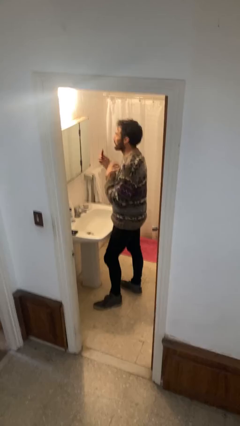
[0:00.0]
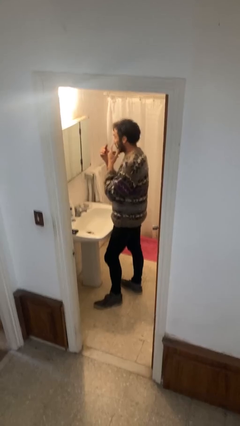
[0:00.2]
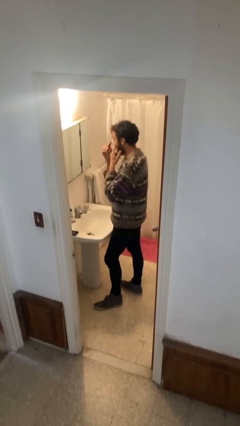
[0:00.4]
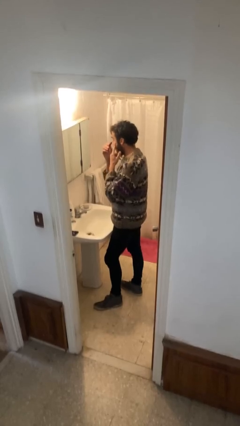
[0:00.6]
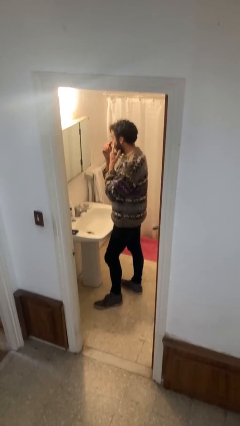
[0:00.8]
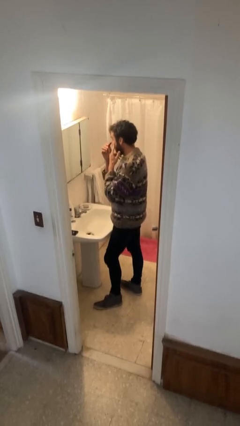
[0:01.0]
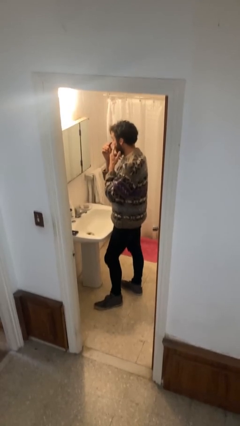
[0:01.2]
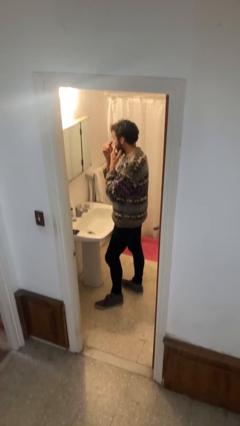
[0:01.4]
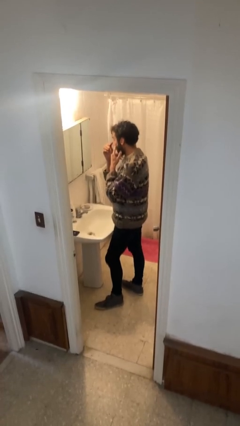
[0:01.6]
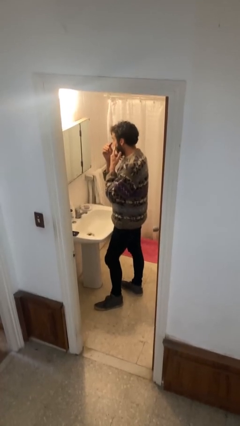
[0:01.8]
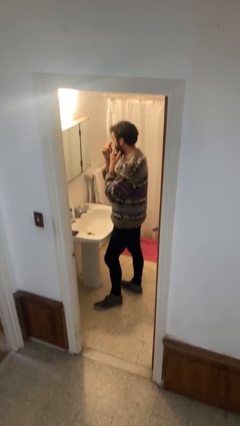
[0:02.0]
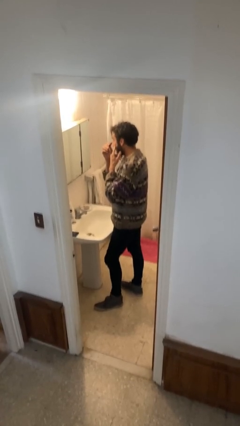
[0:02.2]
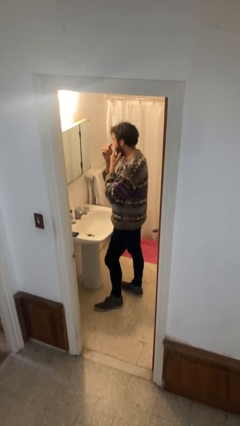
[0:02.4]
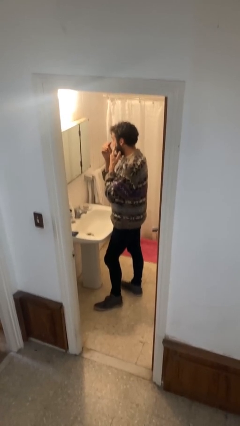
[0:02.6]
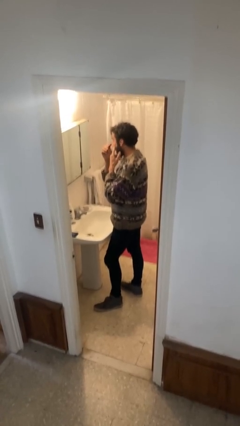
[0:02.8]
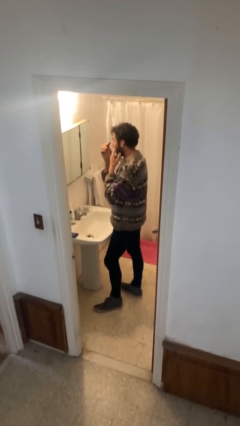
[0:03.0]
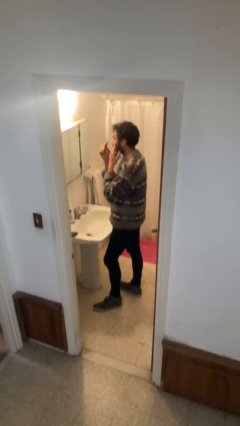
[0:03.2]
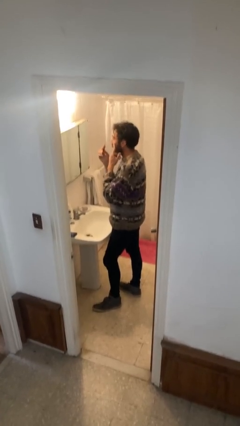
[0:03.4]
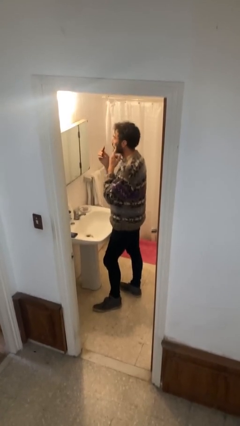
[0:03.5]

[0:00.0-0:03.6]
person applies eye makeup

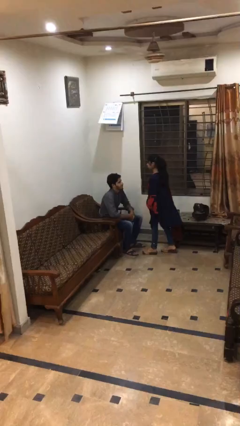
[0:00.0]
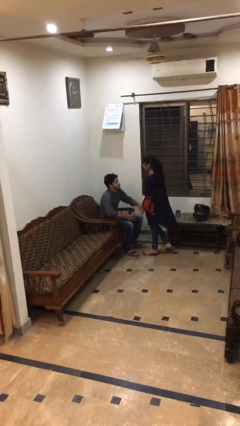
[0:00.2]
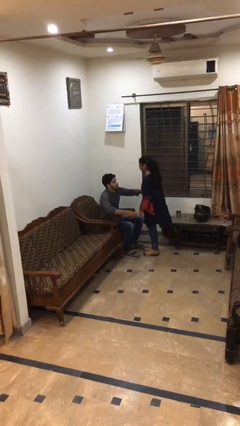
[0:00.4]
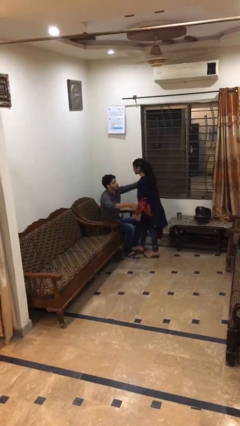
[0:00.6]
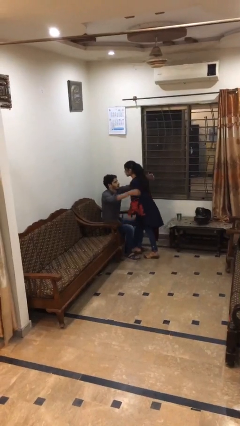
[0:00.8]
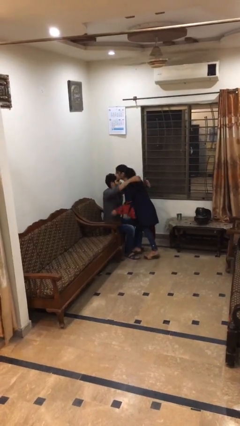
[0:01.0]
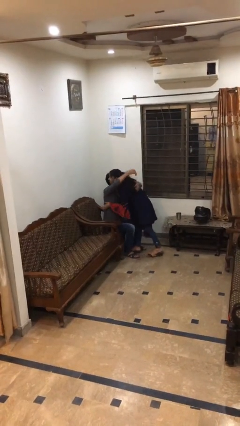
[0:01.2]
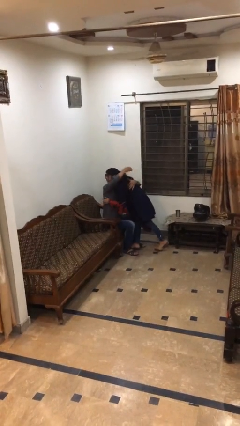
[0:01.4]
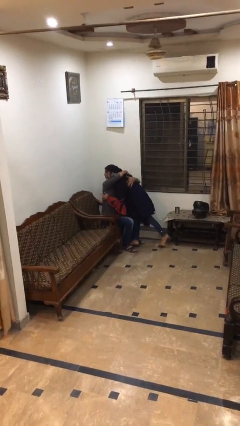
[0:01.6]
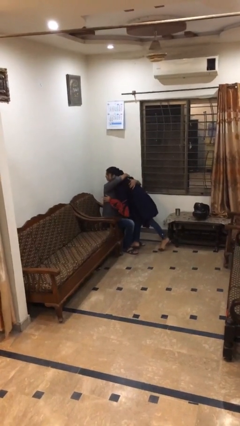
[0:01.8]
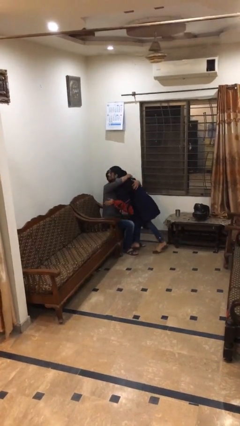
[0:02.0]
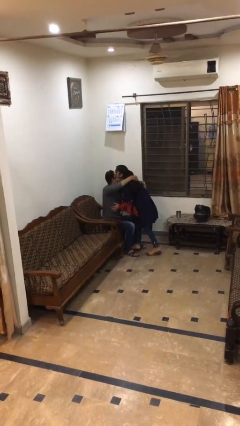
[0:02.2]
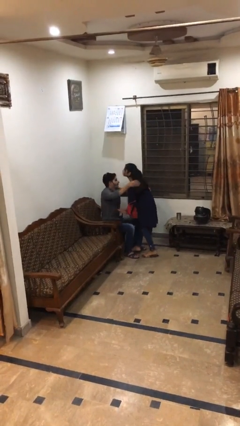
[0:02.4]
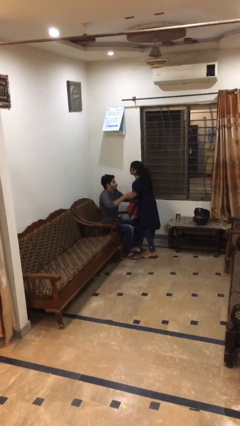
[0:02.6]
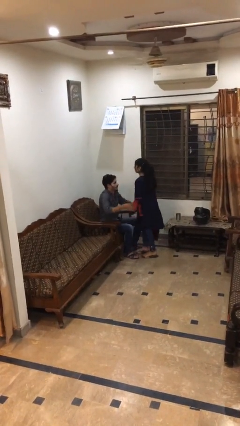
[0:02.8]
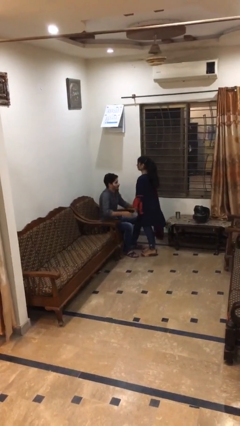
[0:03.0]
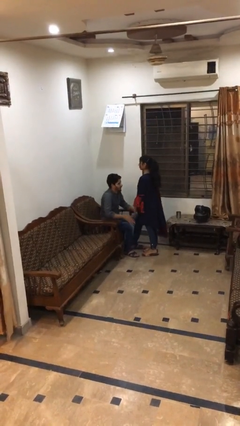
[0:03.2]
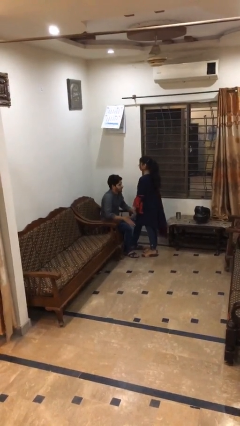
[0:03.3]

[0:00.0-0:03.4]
person embraces person

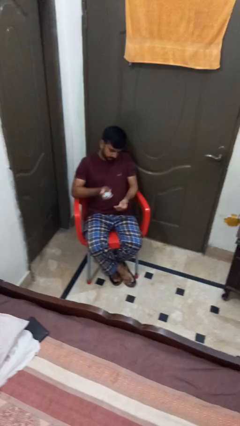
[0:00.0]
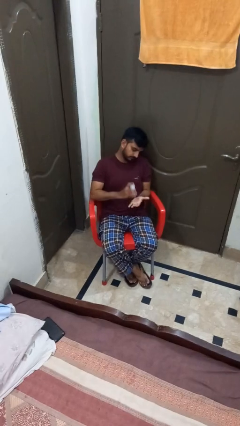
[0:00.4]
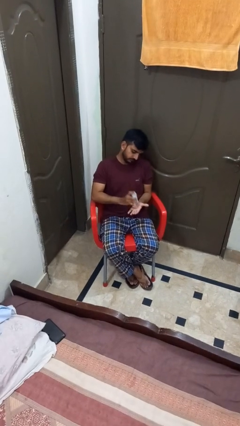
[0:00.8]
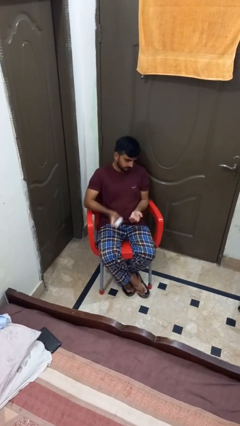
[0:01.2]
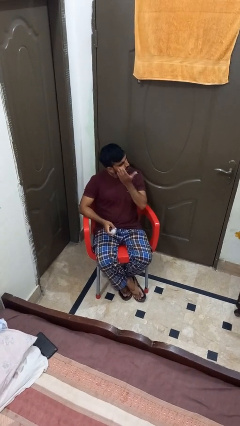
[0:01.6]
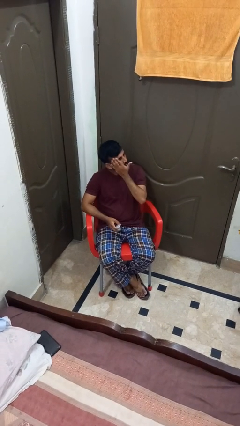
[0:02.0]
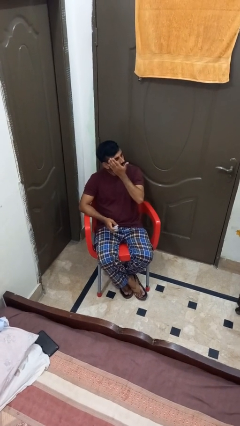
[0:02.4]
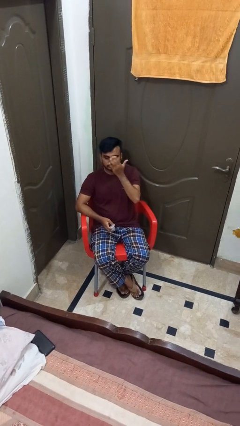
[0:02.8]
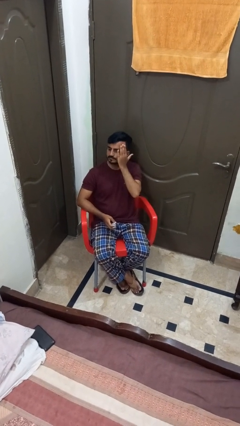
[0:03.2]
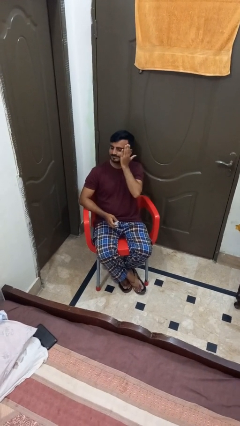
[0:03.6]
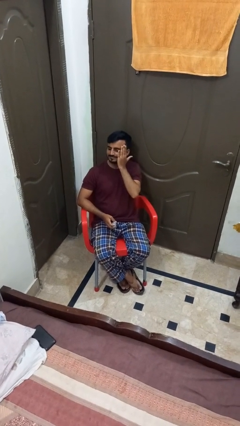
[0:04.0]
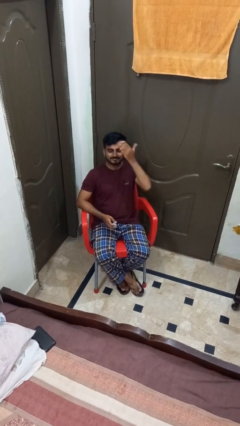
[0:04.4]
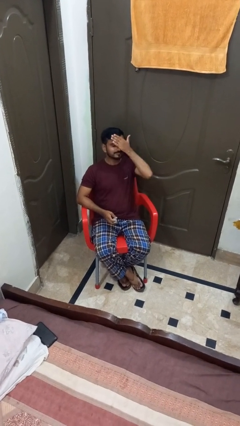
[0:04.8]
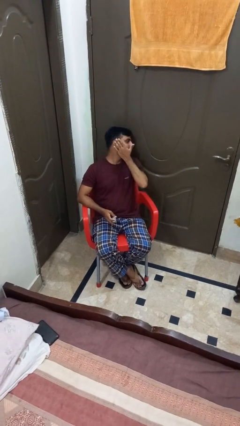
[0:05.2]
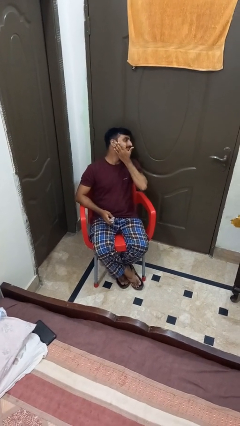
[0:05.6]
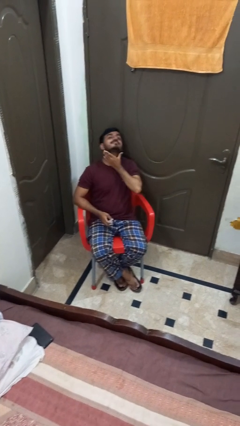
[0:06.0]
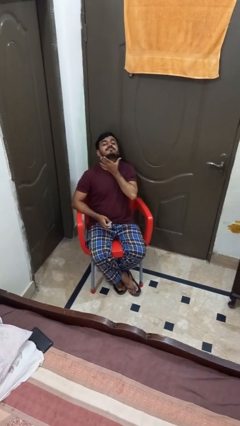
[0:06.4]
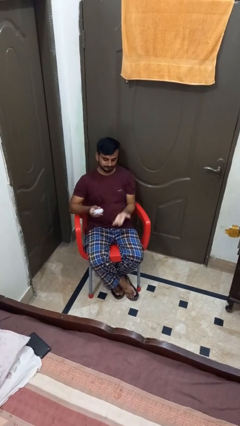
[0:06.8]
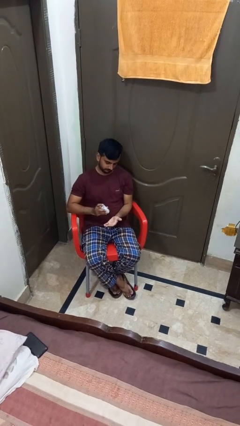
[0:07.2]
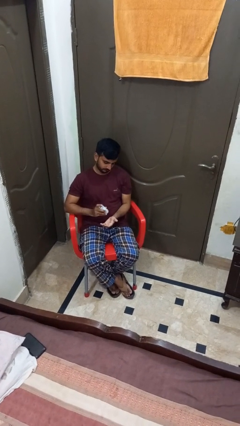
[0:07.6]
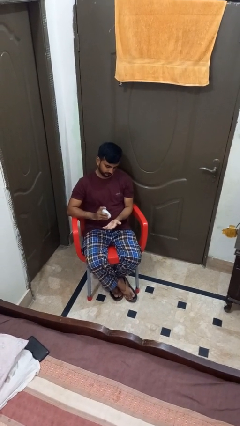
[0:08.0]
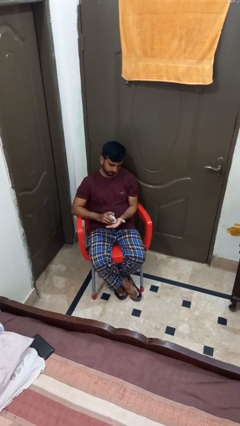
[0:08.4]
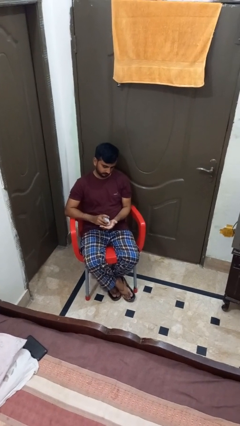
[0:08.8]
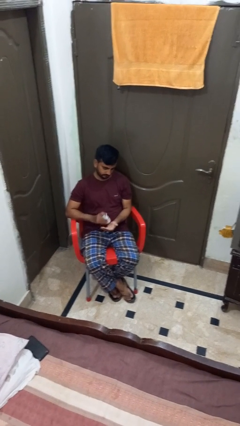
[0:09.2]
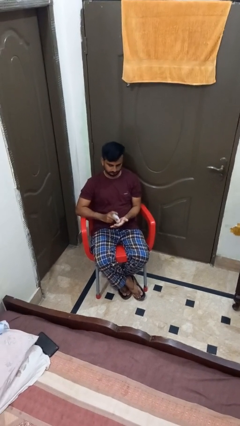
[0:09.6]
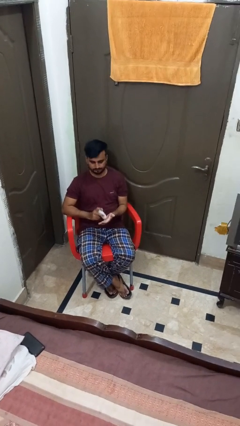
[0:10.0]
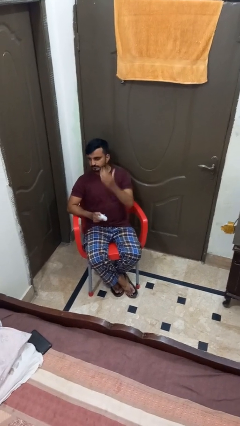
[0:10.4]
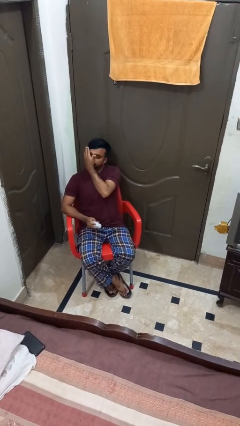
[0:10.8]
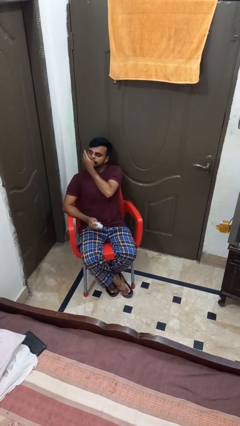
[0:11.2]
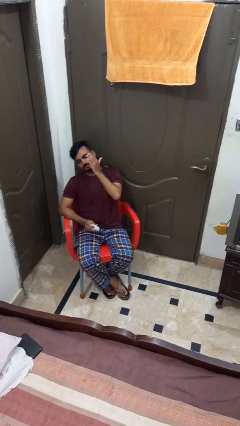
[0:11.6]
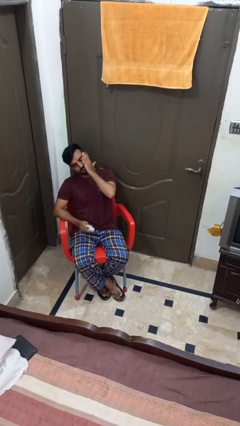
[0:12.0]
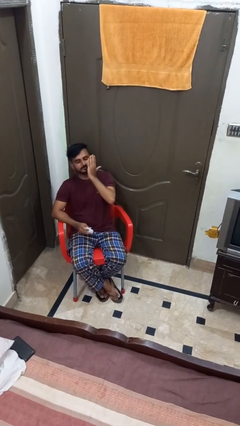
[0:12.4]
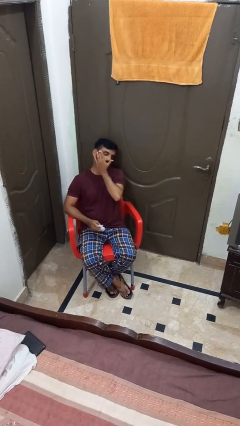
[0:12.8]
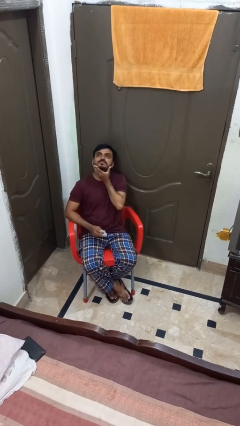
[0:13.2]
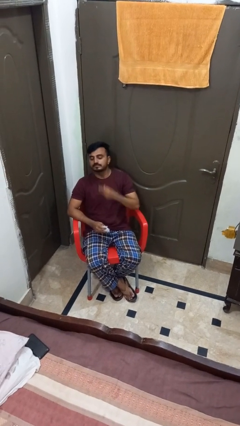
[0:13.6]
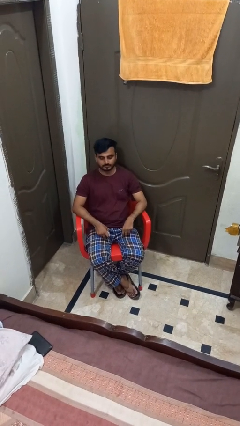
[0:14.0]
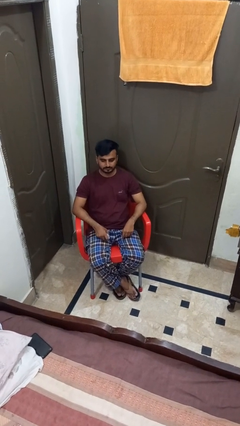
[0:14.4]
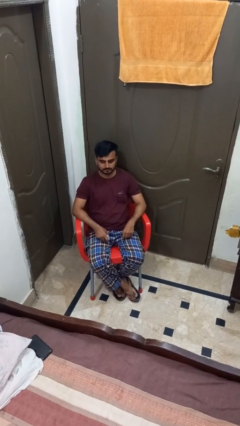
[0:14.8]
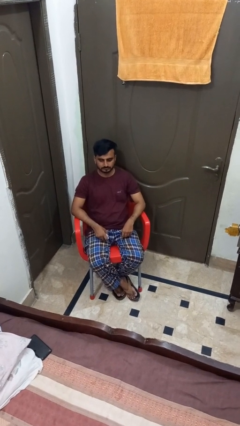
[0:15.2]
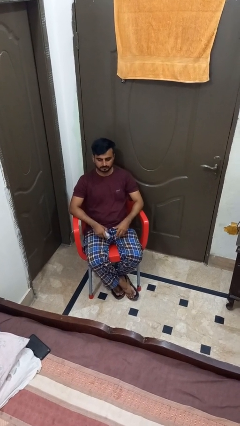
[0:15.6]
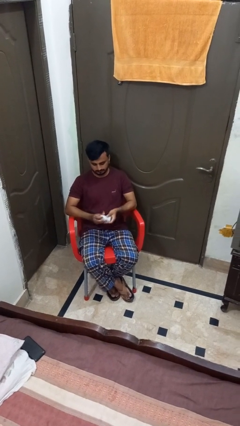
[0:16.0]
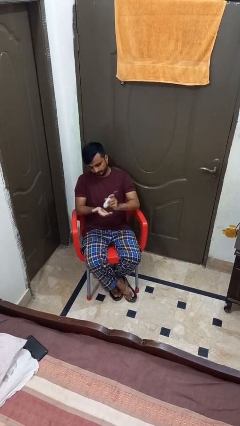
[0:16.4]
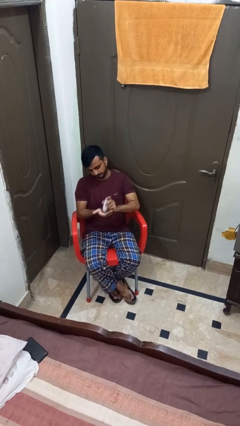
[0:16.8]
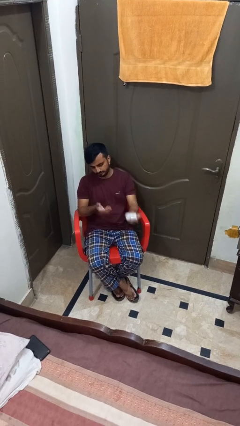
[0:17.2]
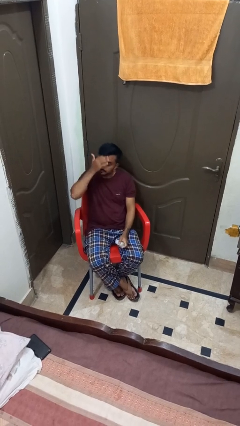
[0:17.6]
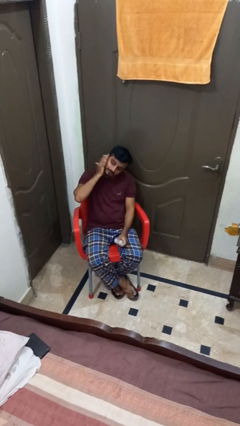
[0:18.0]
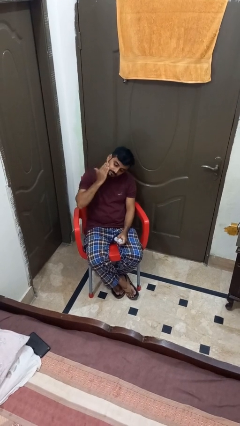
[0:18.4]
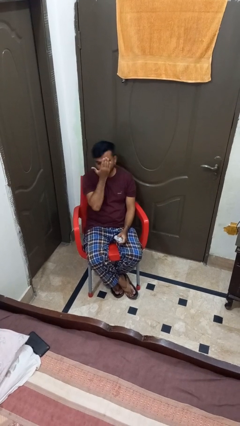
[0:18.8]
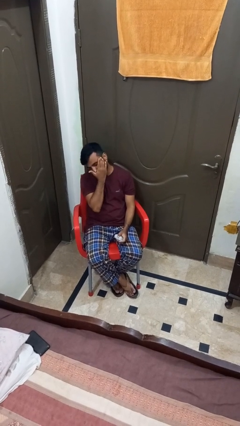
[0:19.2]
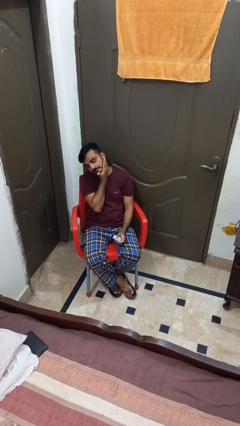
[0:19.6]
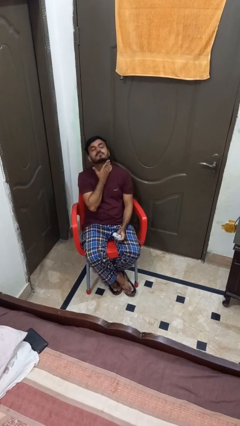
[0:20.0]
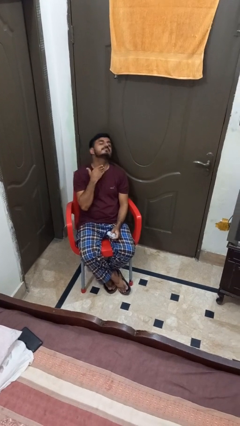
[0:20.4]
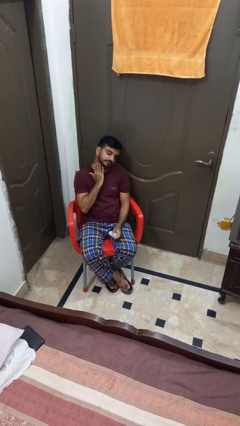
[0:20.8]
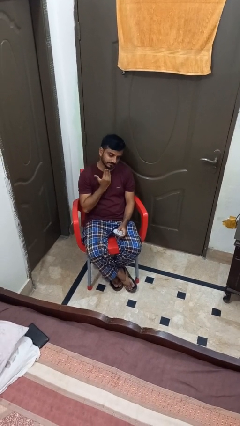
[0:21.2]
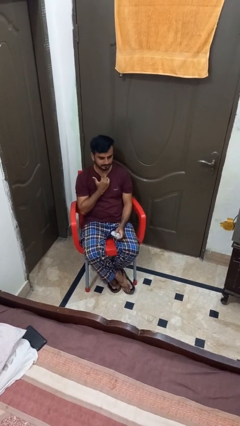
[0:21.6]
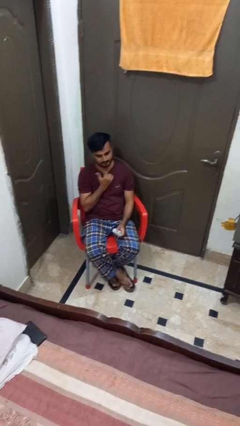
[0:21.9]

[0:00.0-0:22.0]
person applies facial moisturizer
